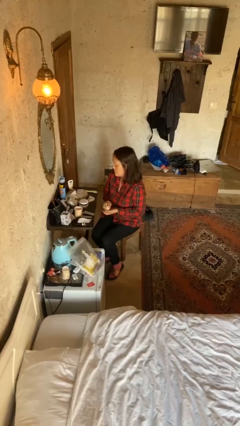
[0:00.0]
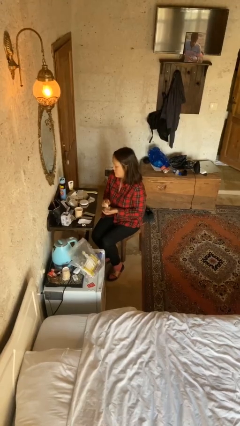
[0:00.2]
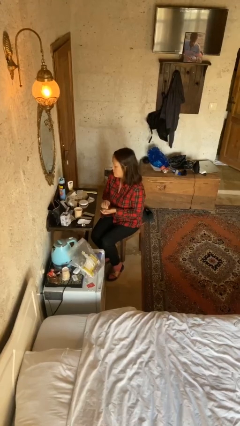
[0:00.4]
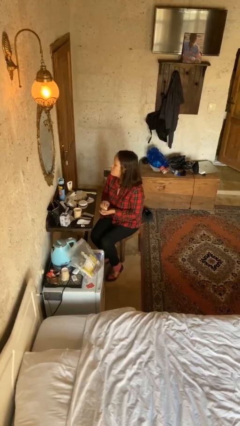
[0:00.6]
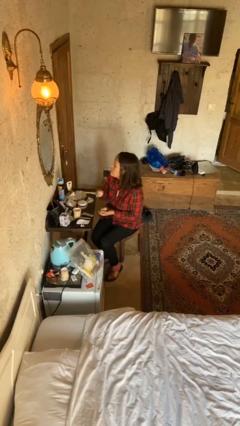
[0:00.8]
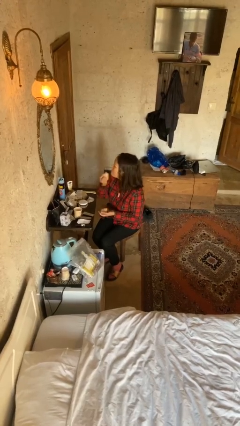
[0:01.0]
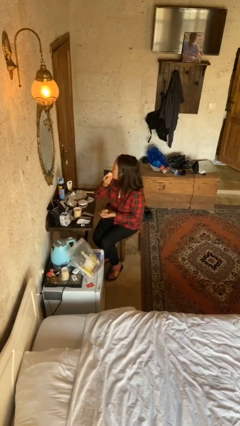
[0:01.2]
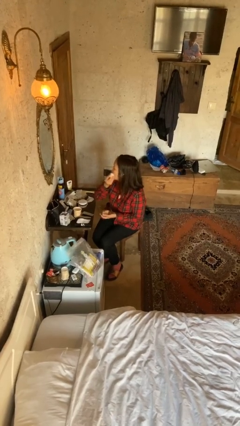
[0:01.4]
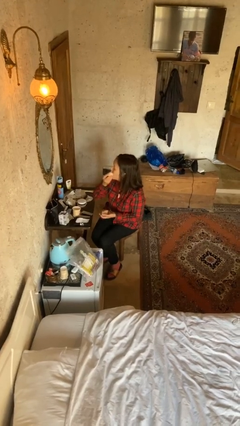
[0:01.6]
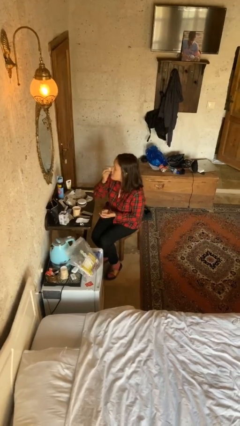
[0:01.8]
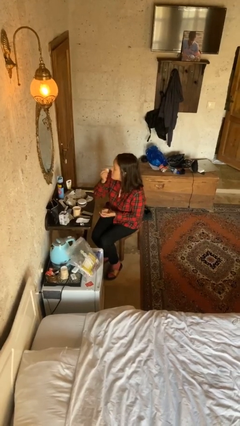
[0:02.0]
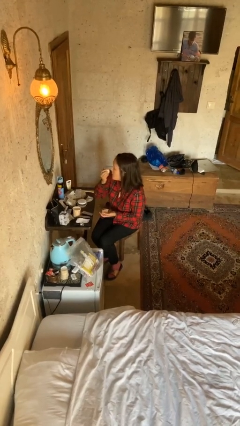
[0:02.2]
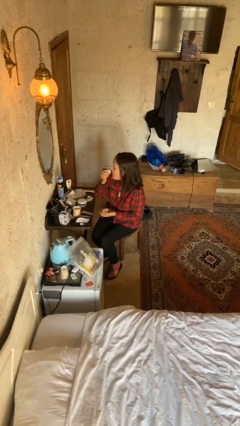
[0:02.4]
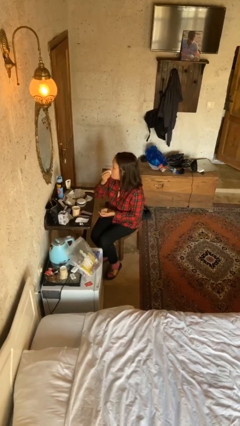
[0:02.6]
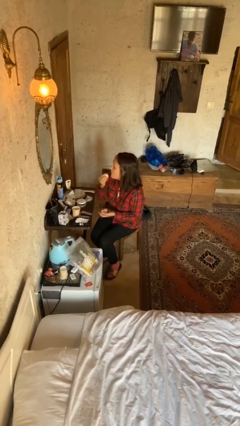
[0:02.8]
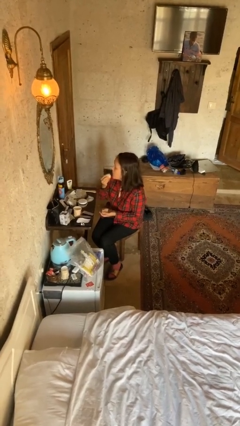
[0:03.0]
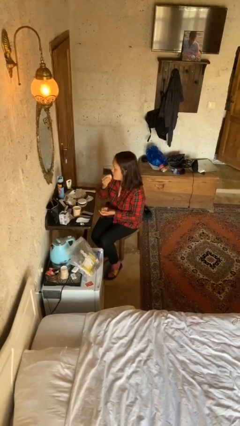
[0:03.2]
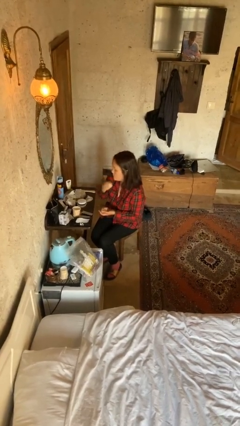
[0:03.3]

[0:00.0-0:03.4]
person applies foundation makeup

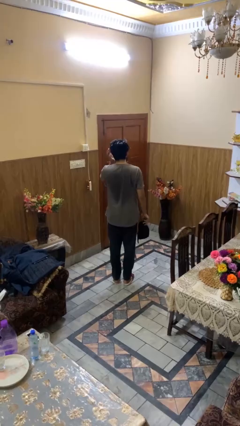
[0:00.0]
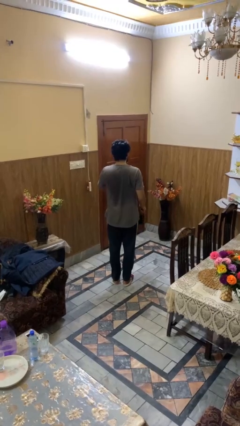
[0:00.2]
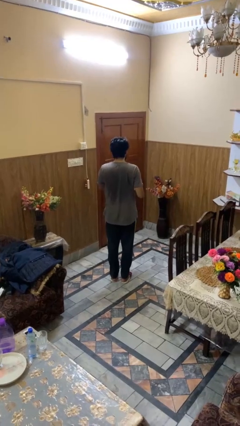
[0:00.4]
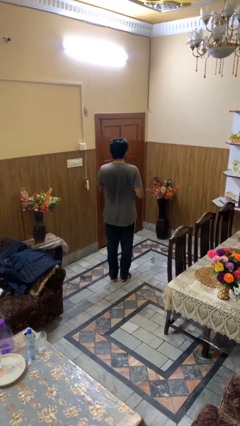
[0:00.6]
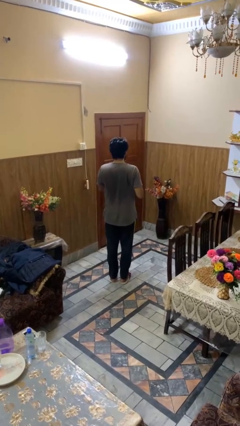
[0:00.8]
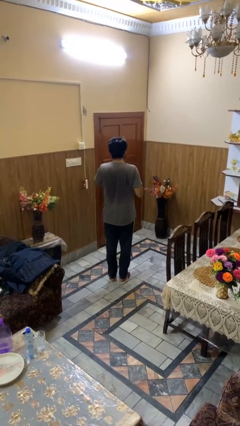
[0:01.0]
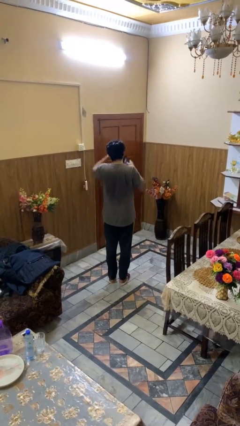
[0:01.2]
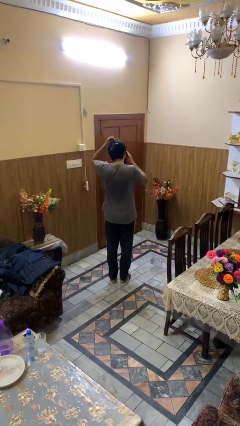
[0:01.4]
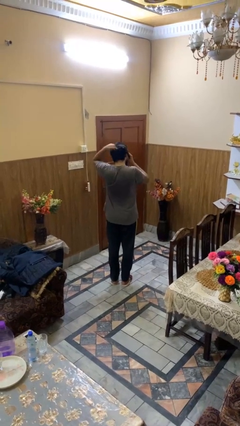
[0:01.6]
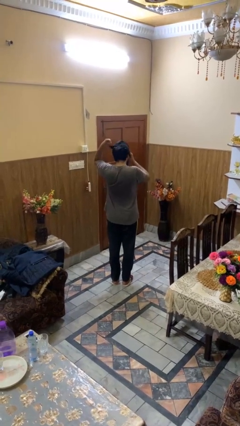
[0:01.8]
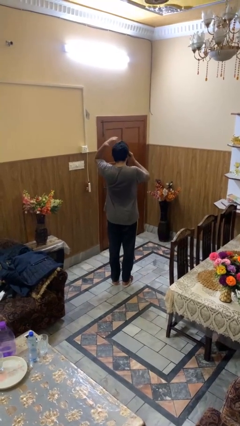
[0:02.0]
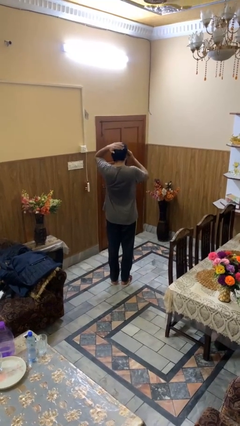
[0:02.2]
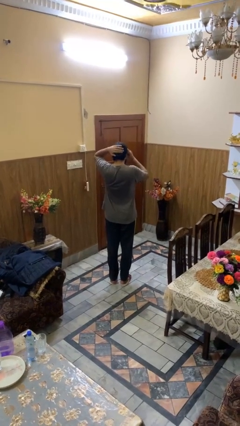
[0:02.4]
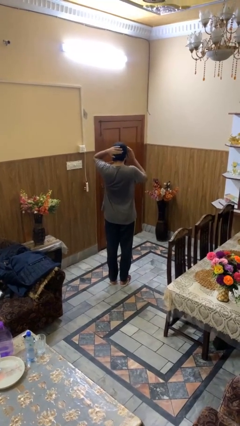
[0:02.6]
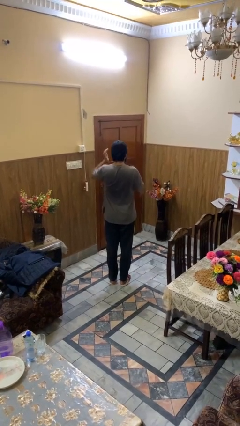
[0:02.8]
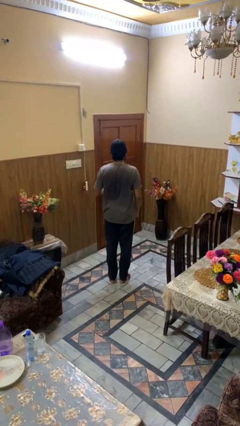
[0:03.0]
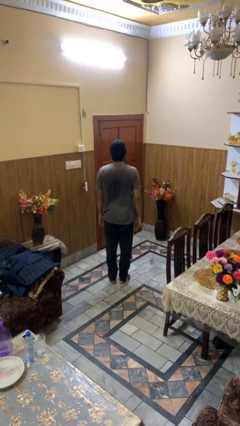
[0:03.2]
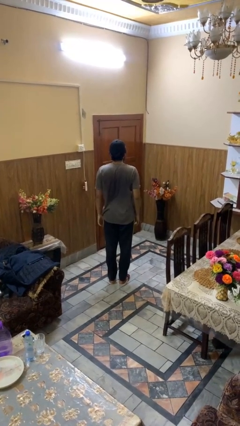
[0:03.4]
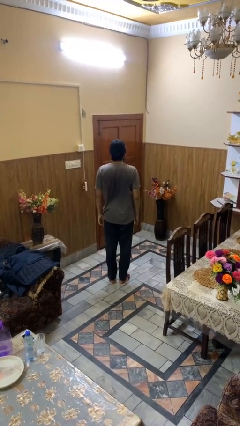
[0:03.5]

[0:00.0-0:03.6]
person puts on hat

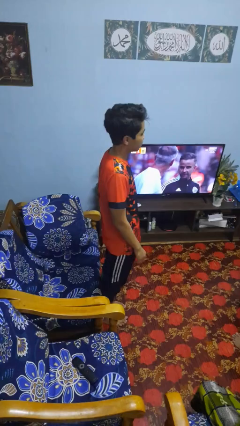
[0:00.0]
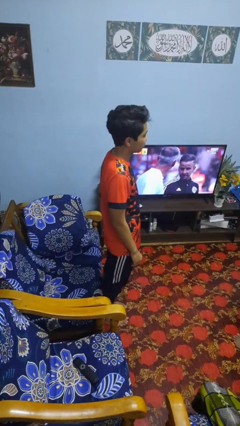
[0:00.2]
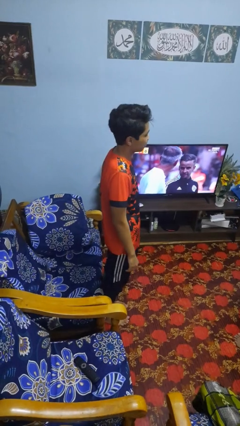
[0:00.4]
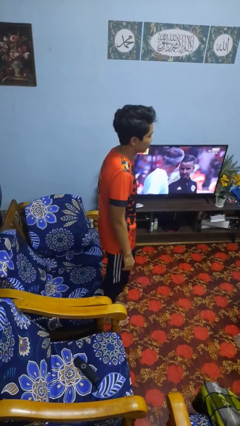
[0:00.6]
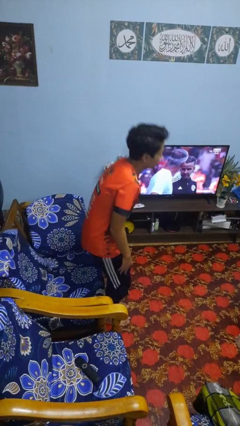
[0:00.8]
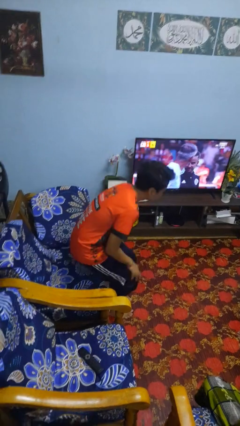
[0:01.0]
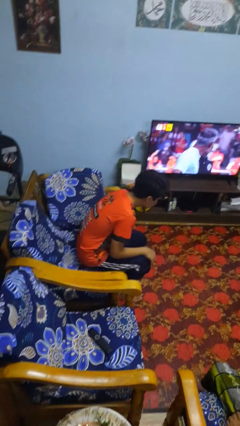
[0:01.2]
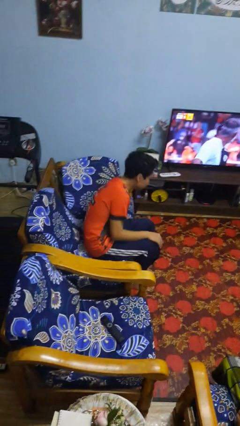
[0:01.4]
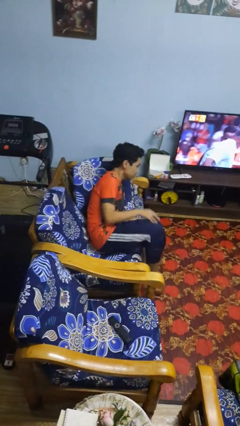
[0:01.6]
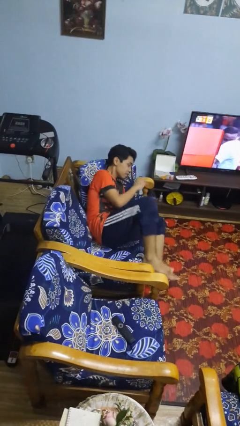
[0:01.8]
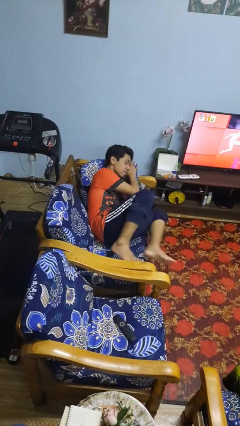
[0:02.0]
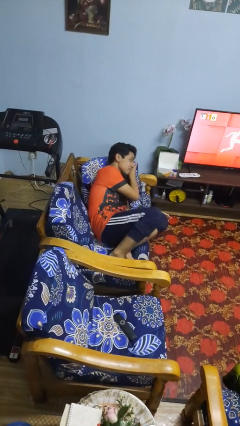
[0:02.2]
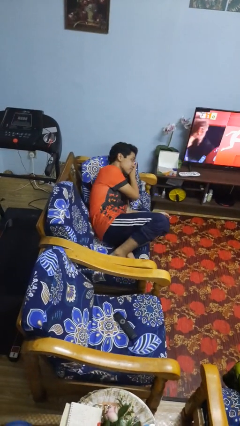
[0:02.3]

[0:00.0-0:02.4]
person lies down on couch

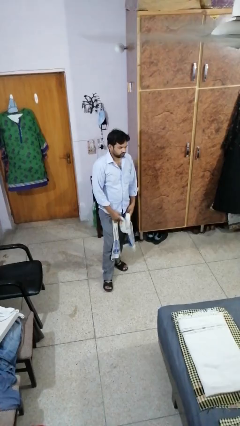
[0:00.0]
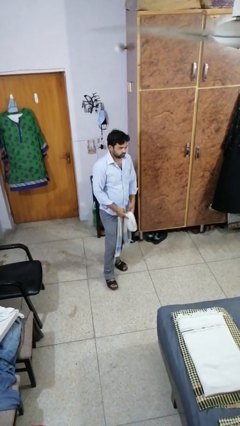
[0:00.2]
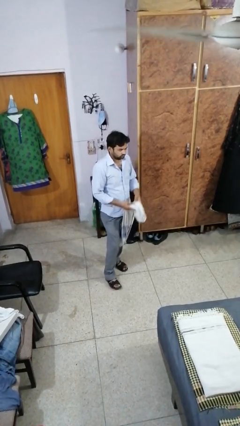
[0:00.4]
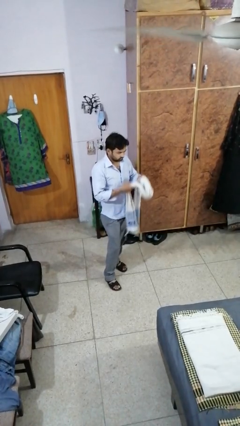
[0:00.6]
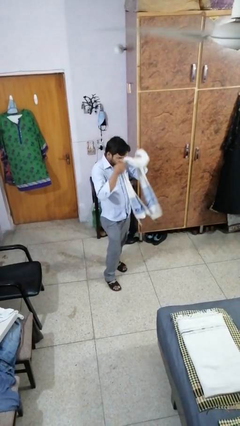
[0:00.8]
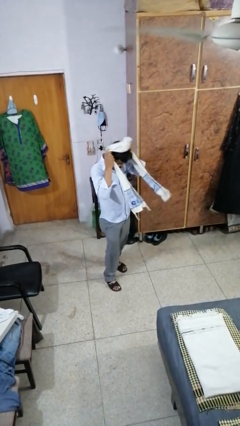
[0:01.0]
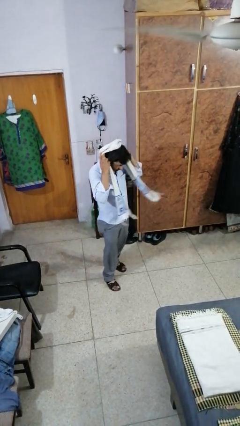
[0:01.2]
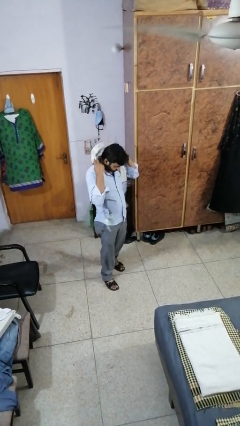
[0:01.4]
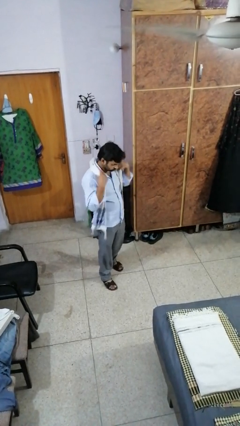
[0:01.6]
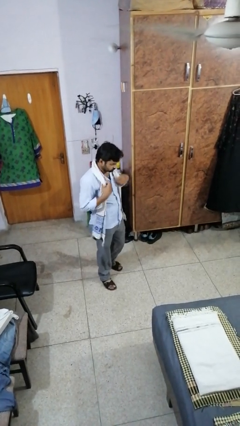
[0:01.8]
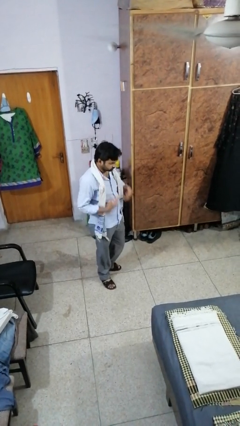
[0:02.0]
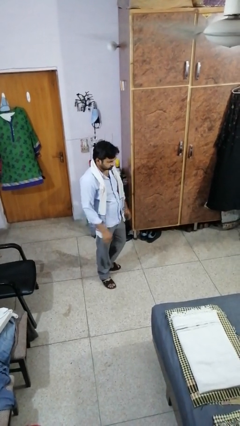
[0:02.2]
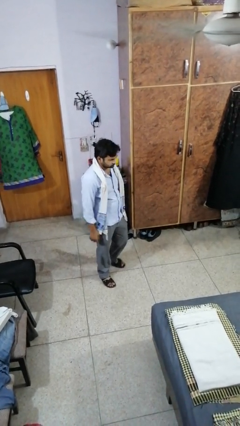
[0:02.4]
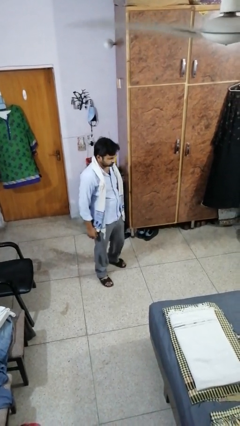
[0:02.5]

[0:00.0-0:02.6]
person puts on scarf

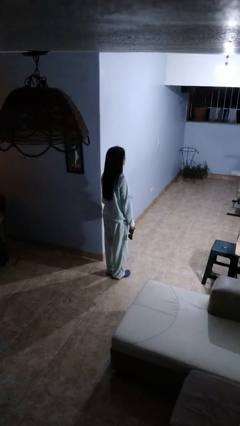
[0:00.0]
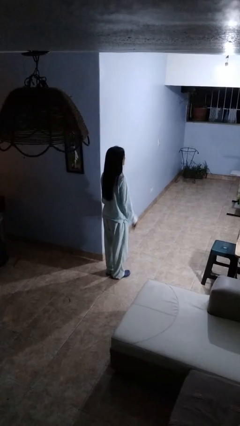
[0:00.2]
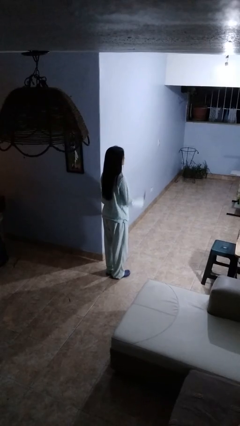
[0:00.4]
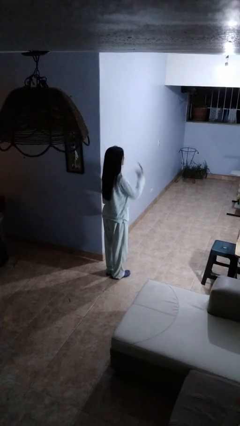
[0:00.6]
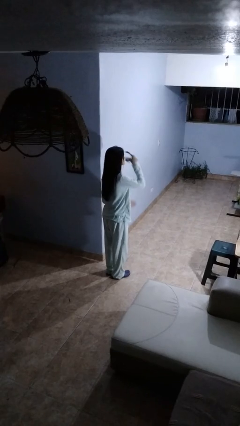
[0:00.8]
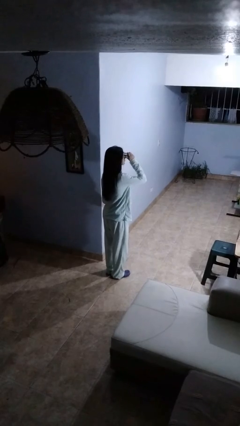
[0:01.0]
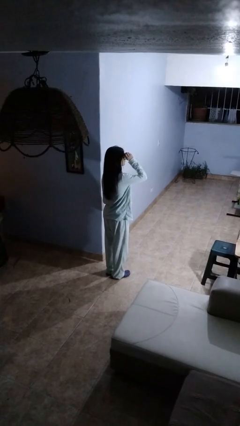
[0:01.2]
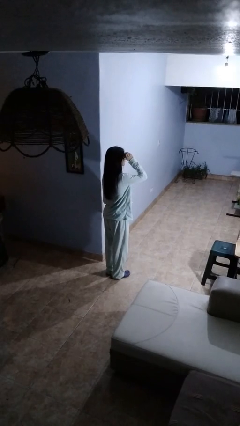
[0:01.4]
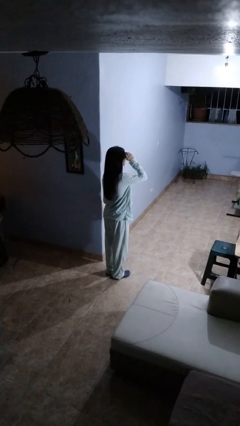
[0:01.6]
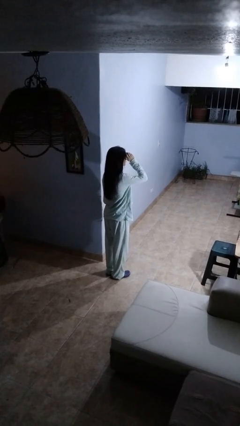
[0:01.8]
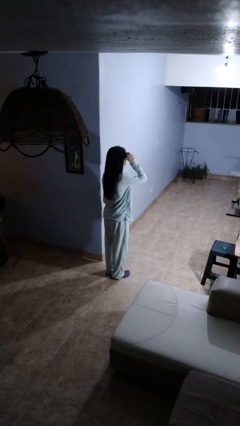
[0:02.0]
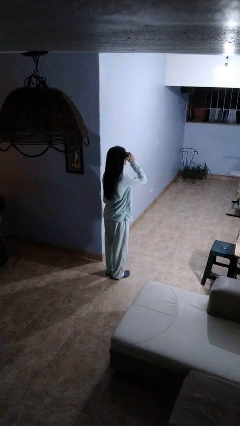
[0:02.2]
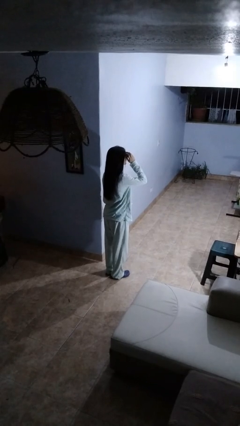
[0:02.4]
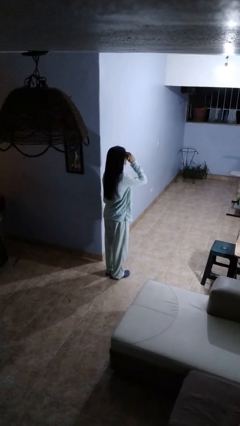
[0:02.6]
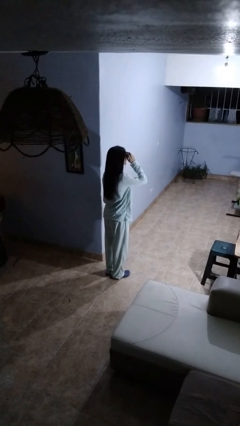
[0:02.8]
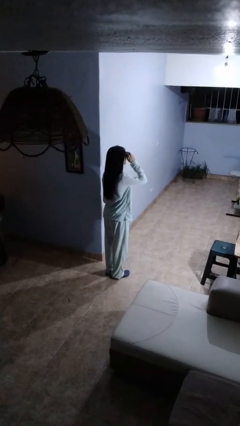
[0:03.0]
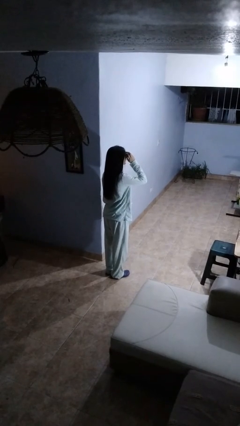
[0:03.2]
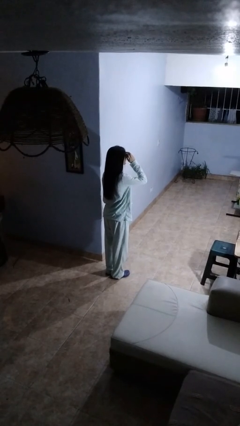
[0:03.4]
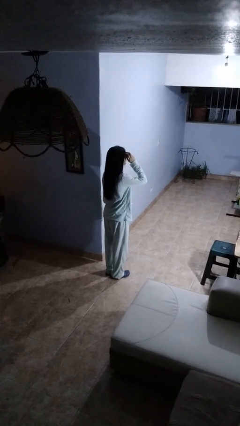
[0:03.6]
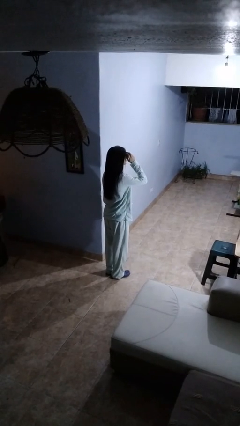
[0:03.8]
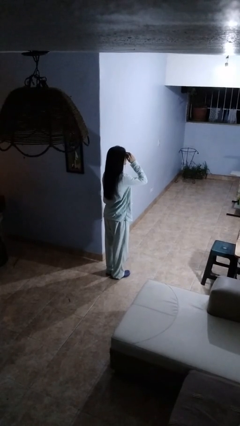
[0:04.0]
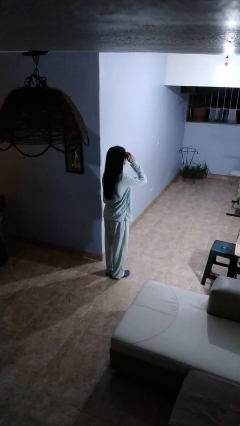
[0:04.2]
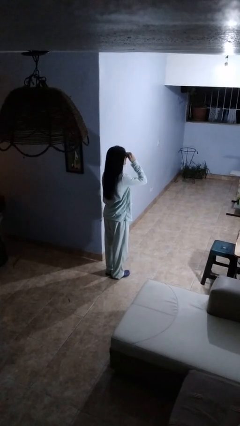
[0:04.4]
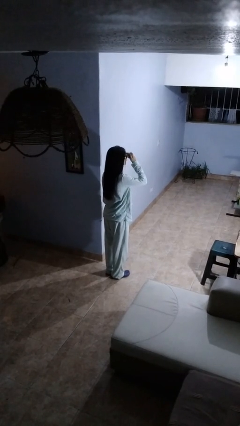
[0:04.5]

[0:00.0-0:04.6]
person puts on sunglasses

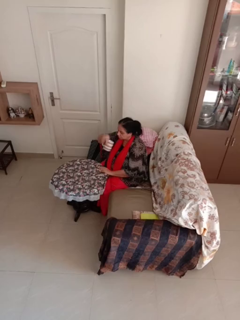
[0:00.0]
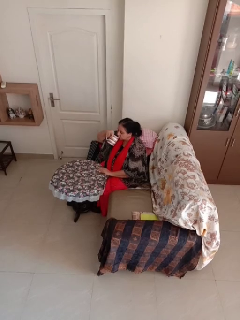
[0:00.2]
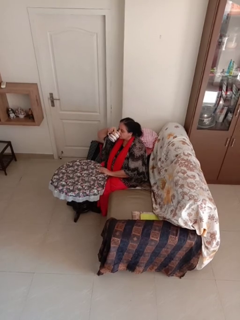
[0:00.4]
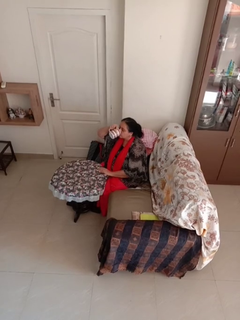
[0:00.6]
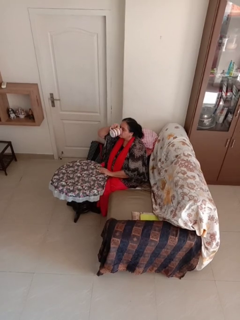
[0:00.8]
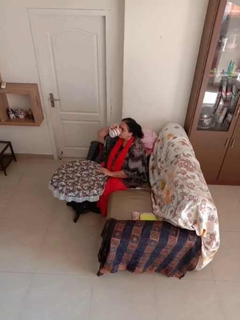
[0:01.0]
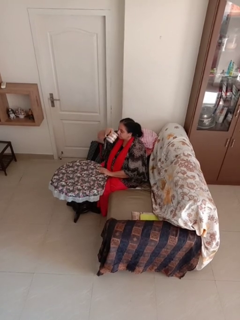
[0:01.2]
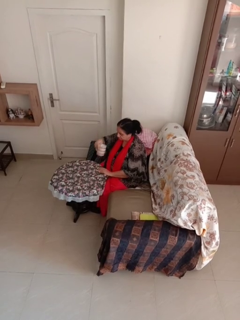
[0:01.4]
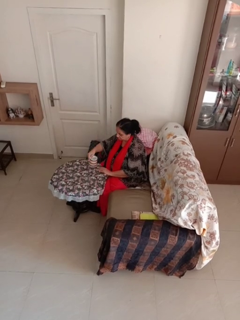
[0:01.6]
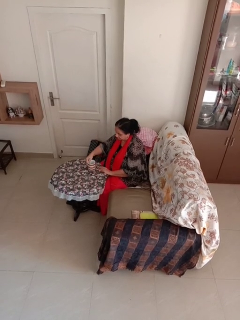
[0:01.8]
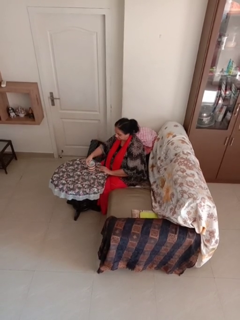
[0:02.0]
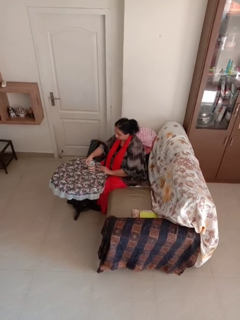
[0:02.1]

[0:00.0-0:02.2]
person drinks from mug
